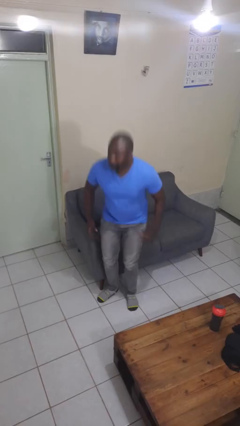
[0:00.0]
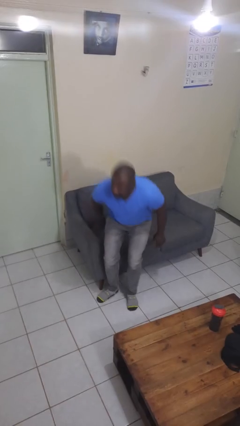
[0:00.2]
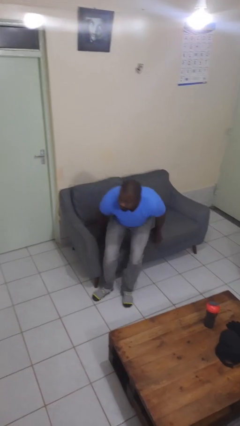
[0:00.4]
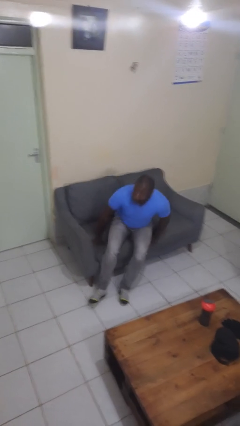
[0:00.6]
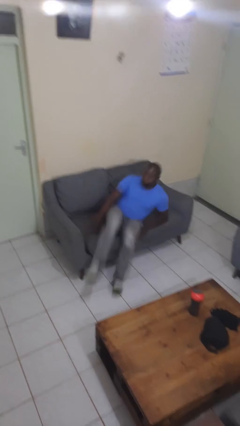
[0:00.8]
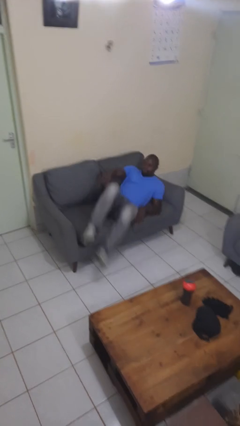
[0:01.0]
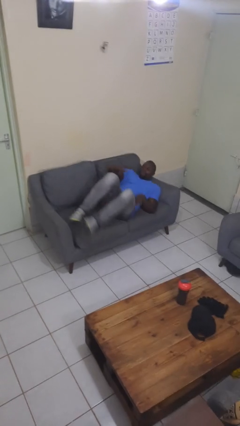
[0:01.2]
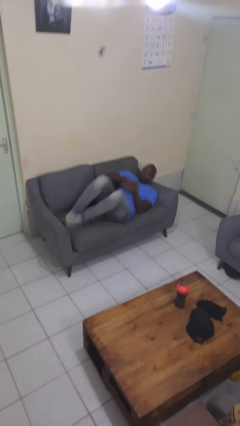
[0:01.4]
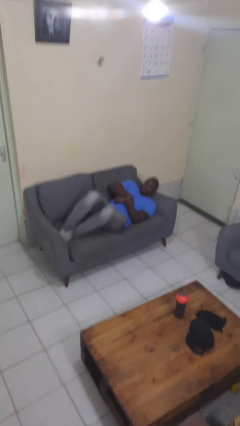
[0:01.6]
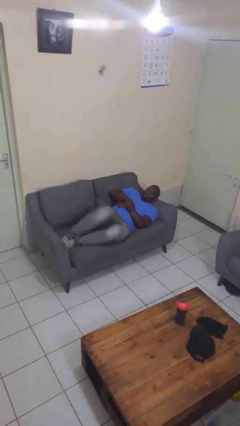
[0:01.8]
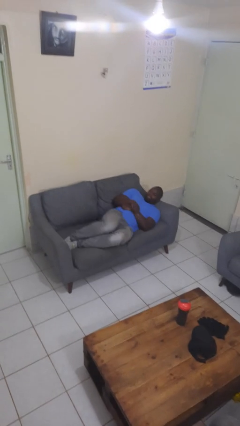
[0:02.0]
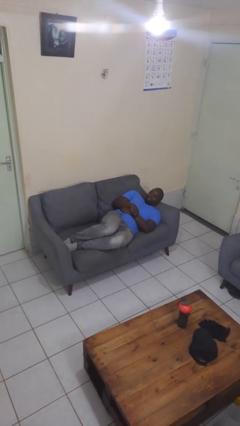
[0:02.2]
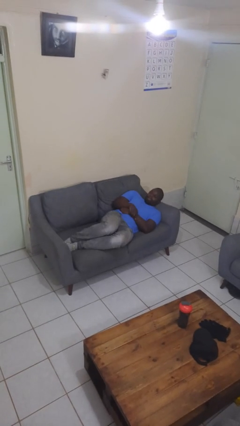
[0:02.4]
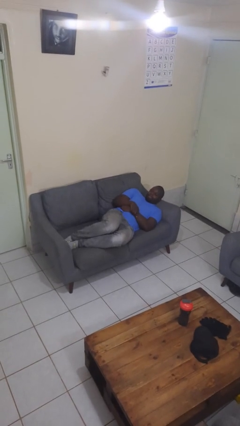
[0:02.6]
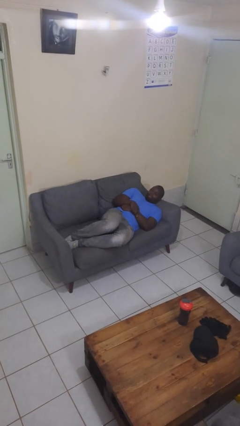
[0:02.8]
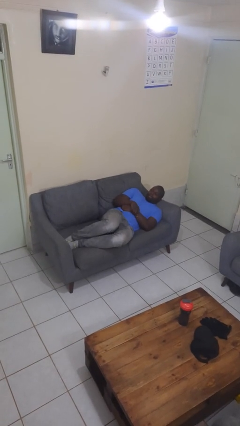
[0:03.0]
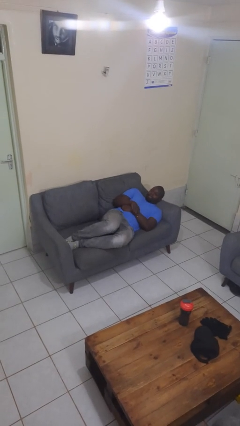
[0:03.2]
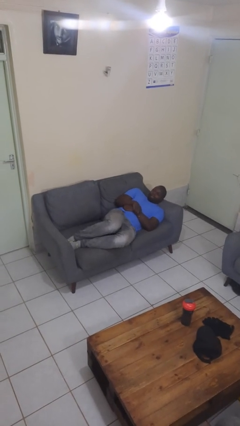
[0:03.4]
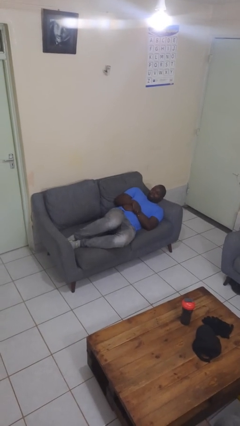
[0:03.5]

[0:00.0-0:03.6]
person lies down on couch

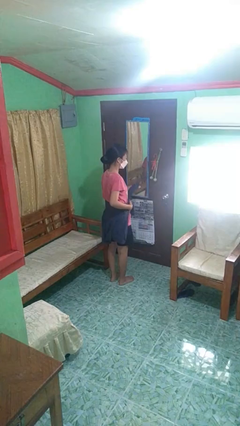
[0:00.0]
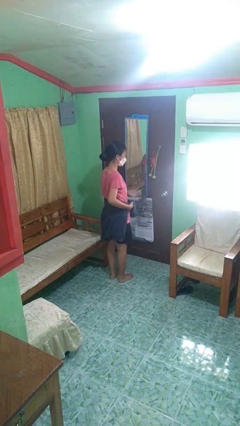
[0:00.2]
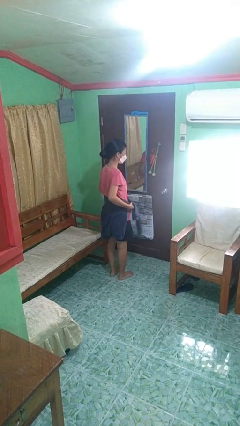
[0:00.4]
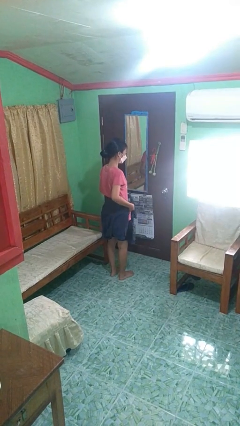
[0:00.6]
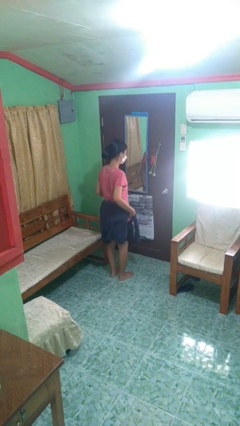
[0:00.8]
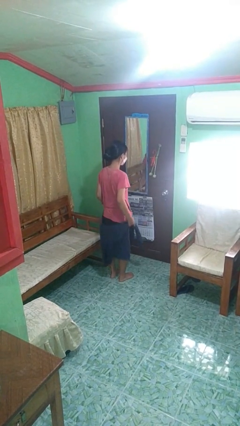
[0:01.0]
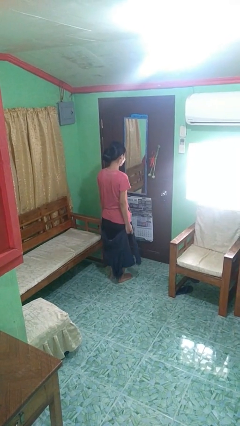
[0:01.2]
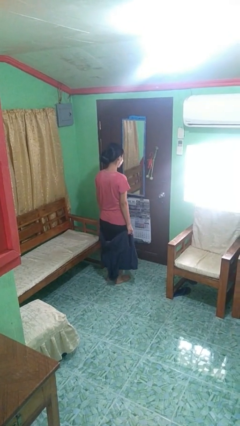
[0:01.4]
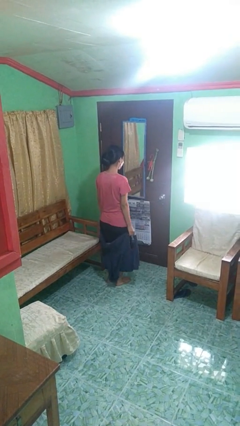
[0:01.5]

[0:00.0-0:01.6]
person unties jacket around waist

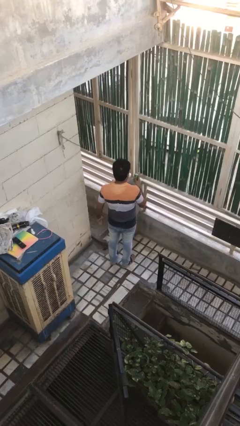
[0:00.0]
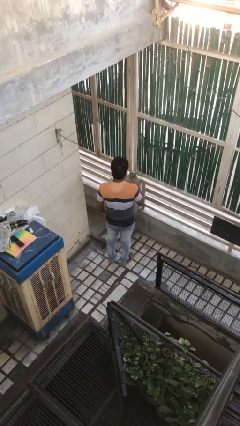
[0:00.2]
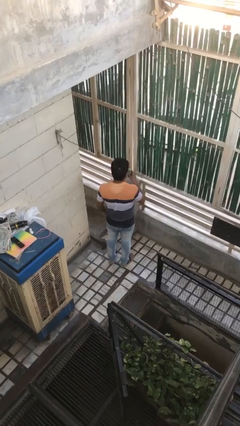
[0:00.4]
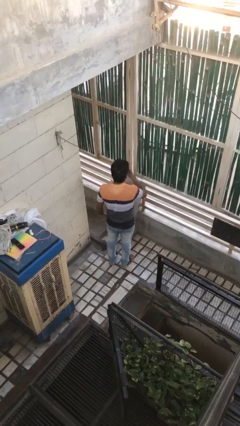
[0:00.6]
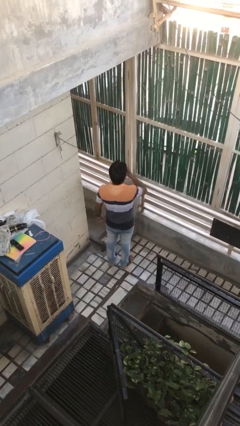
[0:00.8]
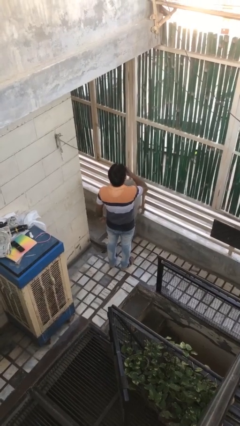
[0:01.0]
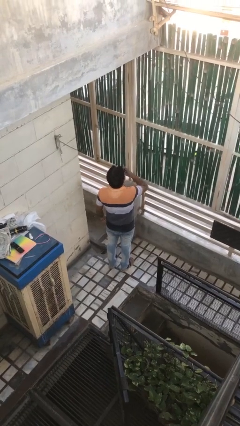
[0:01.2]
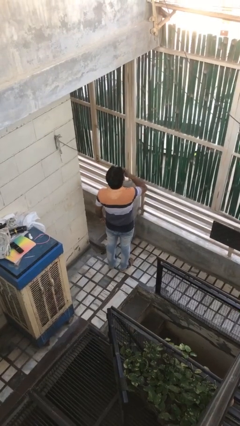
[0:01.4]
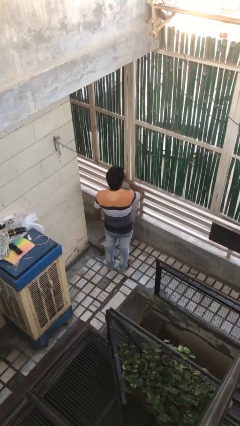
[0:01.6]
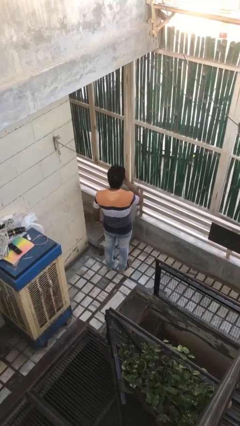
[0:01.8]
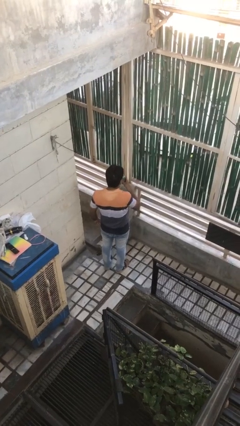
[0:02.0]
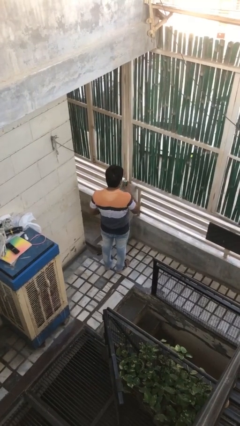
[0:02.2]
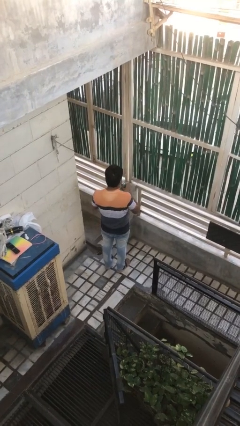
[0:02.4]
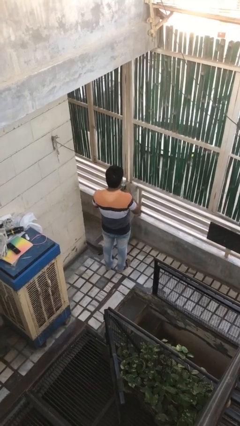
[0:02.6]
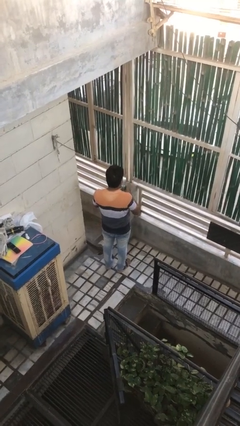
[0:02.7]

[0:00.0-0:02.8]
person drinks from beverage can

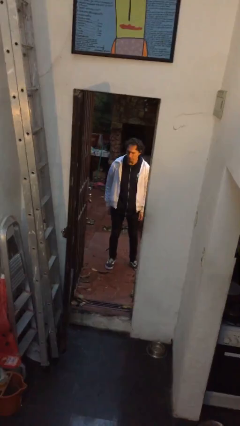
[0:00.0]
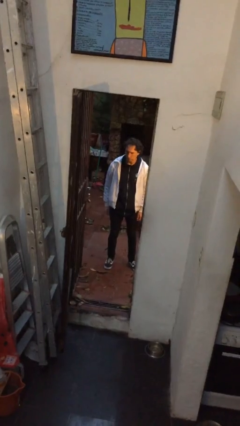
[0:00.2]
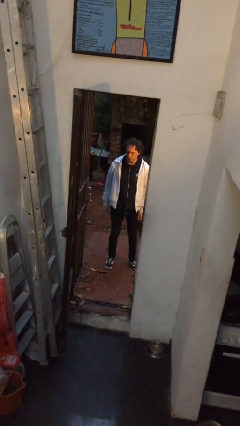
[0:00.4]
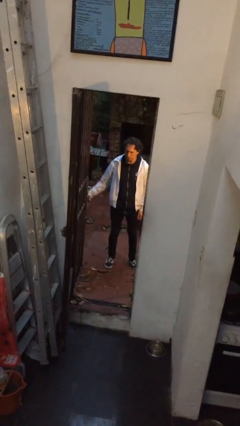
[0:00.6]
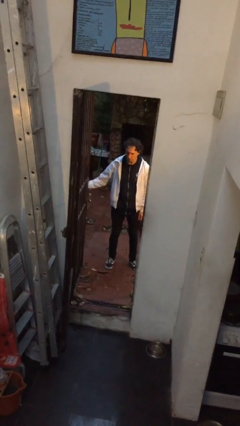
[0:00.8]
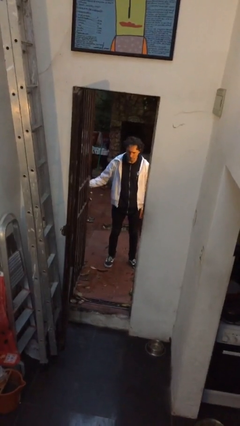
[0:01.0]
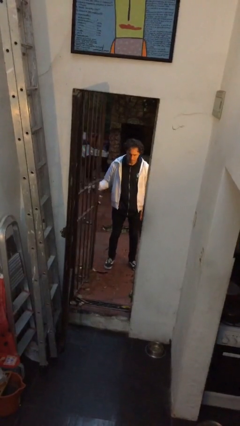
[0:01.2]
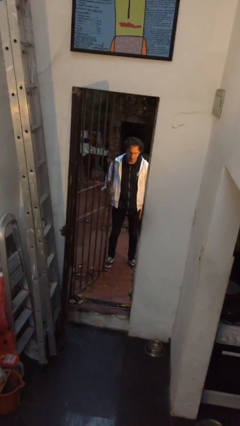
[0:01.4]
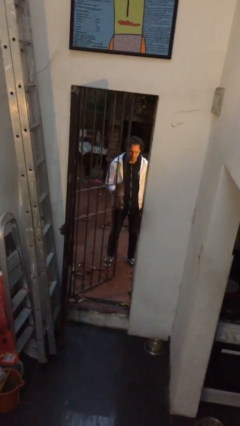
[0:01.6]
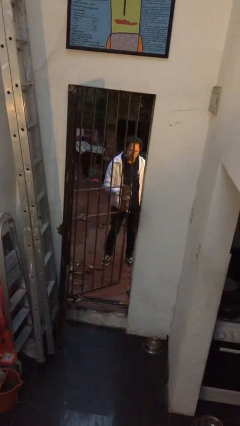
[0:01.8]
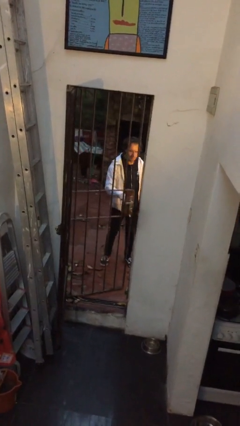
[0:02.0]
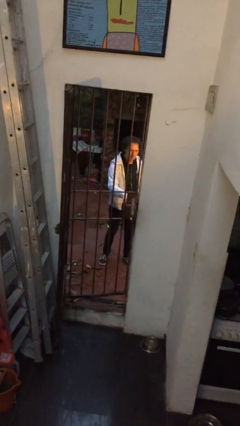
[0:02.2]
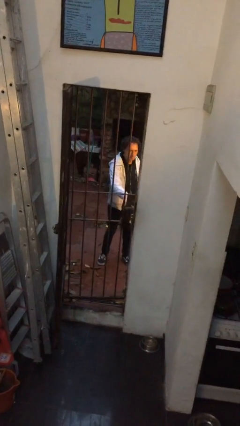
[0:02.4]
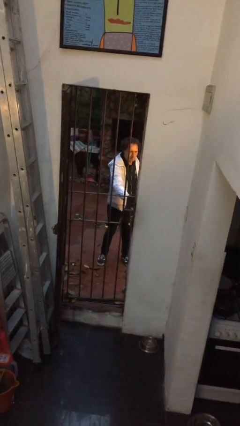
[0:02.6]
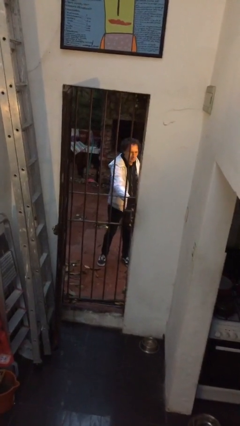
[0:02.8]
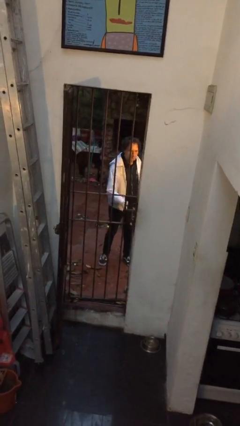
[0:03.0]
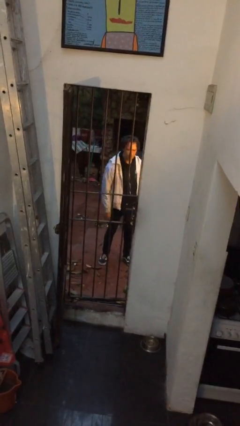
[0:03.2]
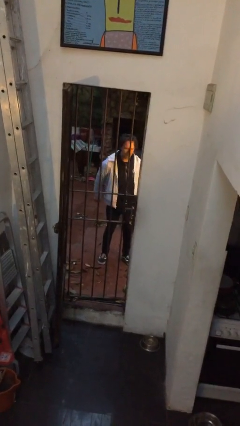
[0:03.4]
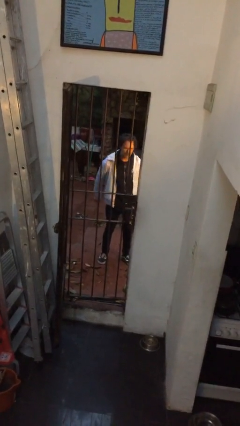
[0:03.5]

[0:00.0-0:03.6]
person closes gate

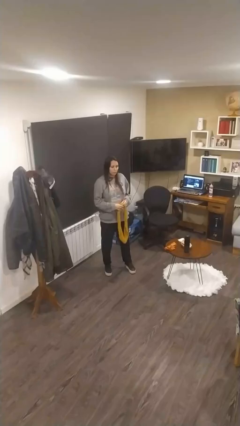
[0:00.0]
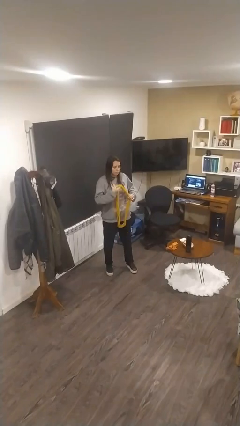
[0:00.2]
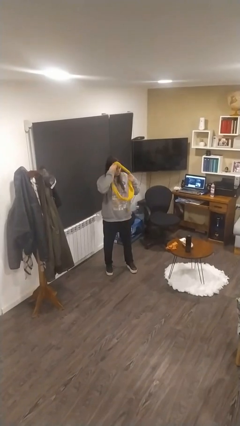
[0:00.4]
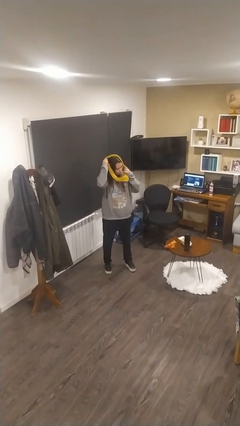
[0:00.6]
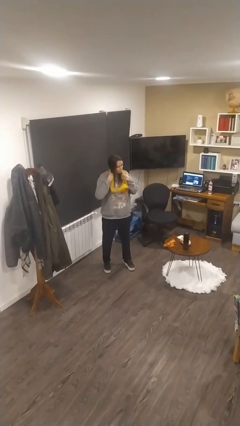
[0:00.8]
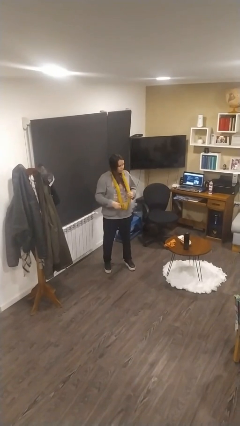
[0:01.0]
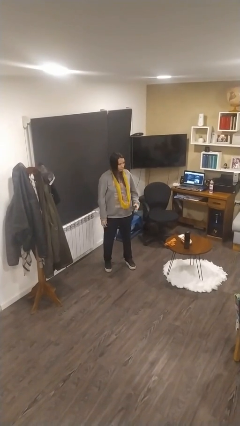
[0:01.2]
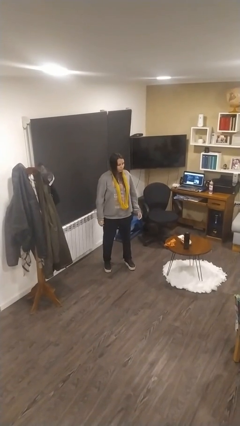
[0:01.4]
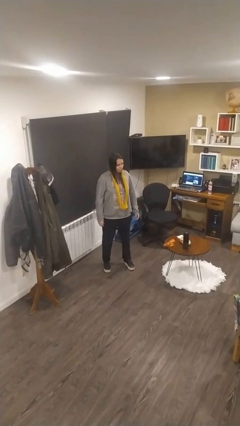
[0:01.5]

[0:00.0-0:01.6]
person puts on scarf

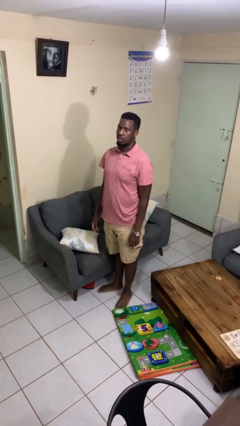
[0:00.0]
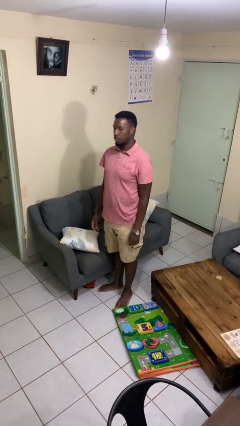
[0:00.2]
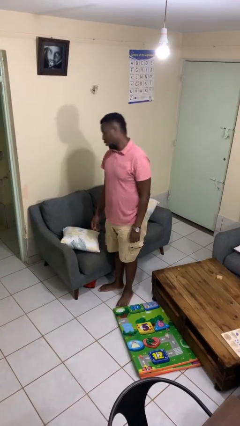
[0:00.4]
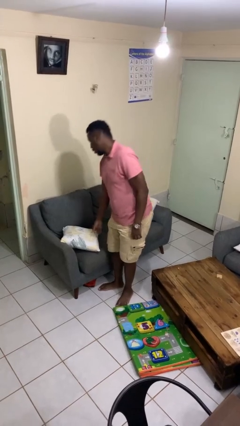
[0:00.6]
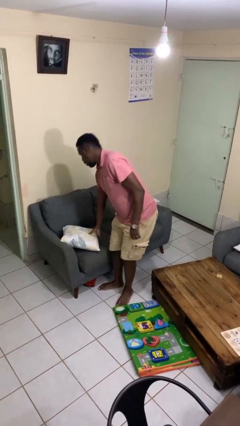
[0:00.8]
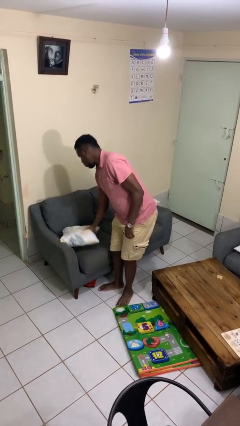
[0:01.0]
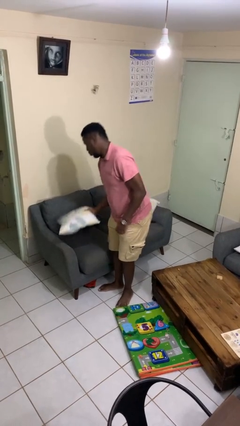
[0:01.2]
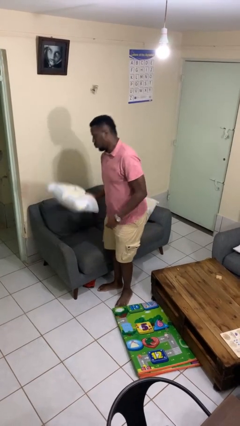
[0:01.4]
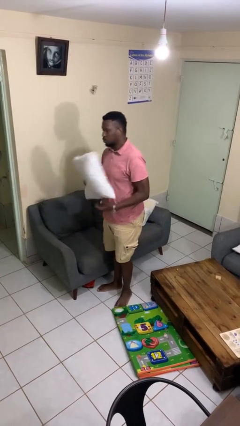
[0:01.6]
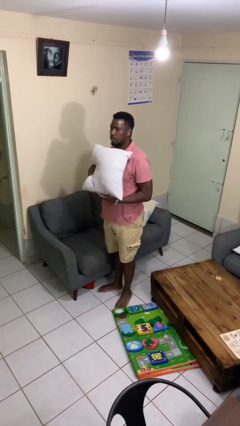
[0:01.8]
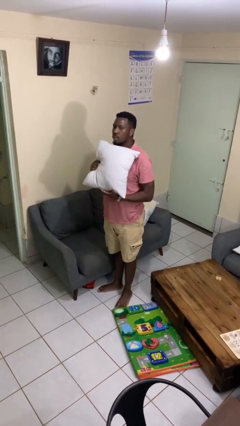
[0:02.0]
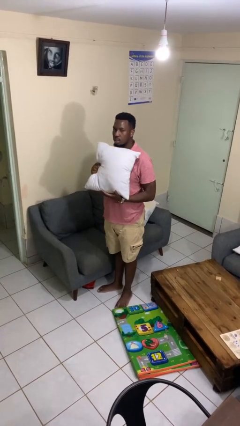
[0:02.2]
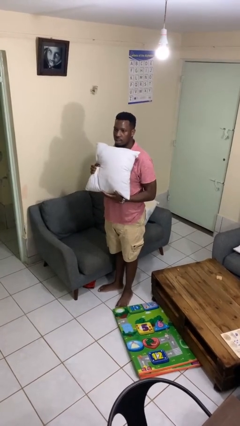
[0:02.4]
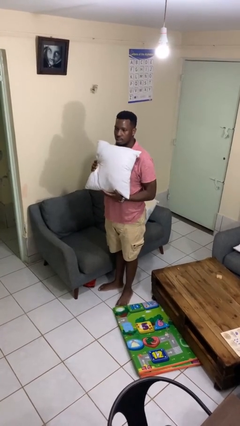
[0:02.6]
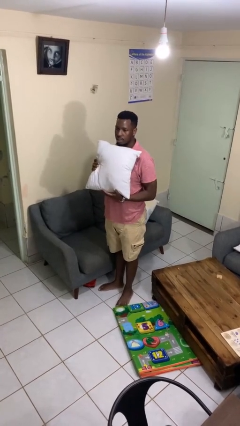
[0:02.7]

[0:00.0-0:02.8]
person picks up object from couch

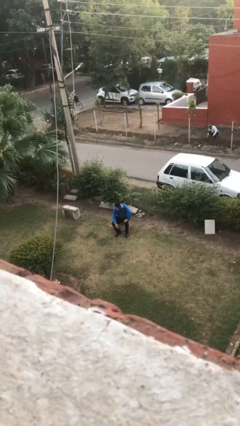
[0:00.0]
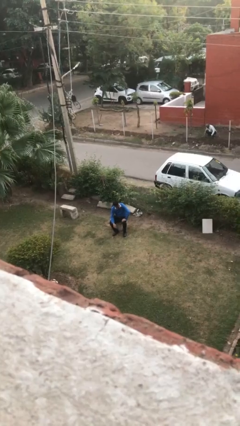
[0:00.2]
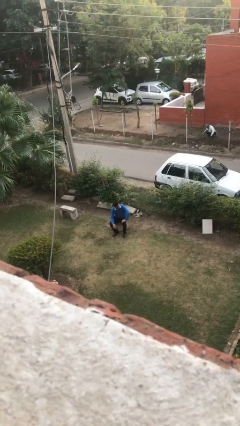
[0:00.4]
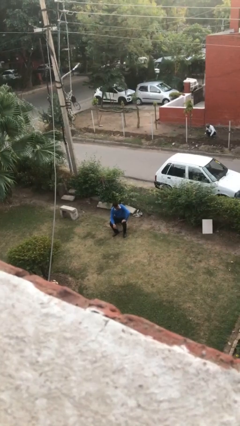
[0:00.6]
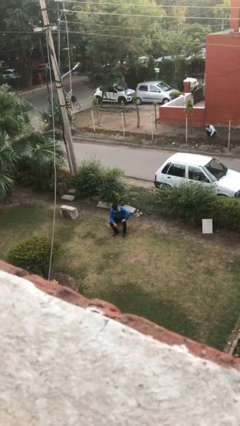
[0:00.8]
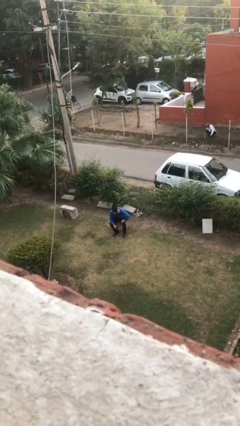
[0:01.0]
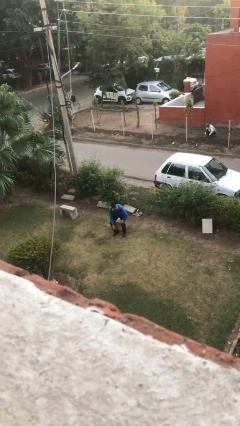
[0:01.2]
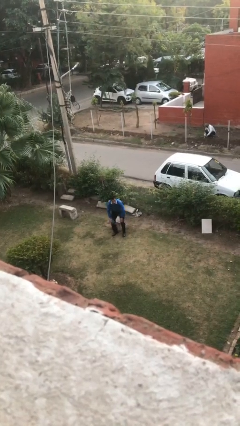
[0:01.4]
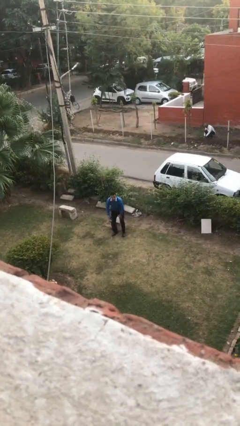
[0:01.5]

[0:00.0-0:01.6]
person stands up
